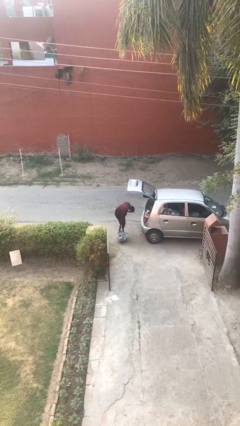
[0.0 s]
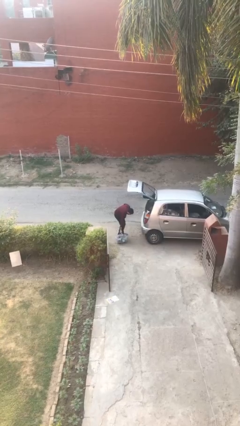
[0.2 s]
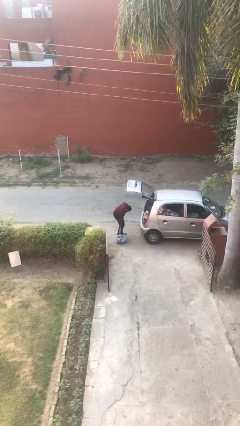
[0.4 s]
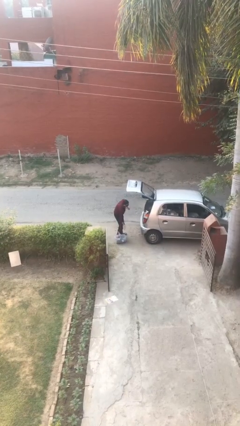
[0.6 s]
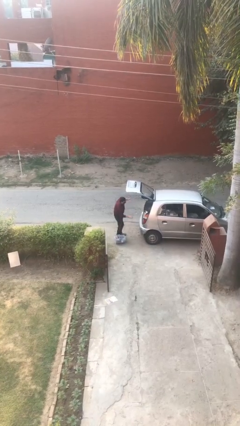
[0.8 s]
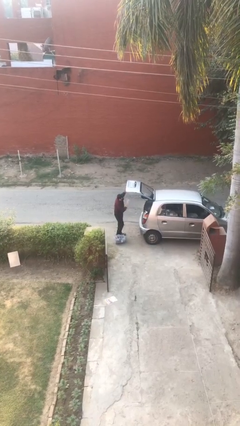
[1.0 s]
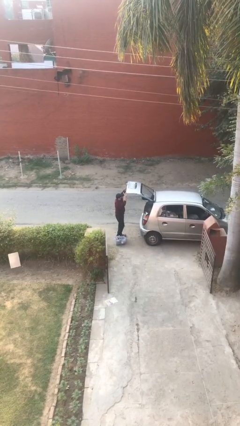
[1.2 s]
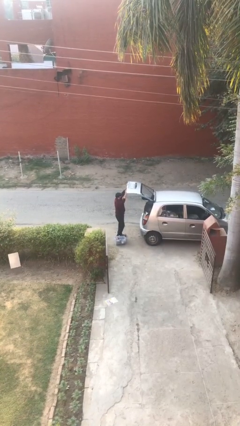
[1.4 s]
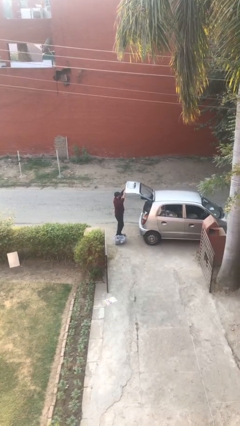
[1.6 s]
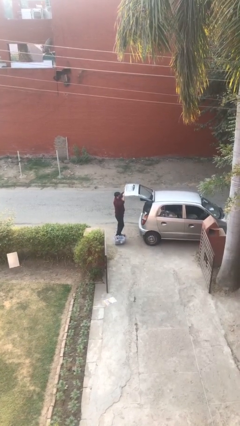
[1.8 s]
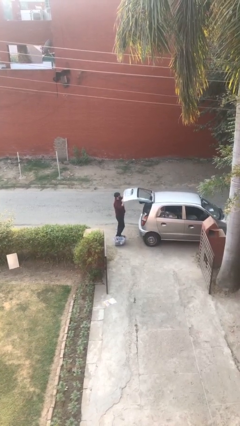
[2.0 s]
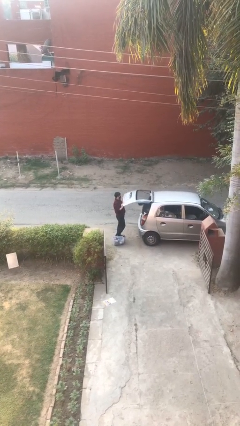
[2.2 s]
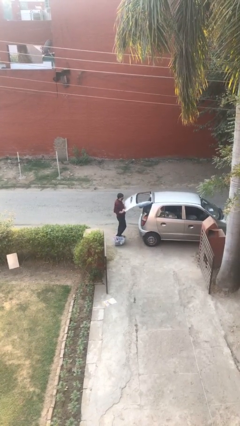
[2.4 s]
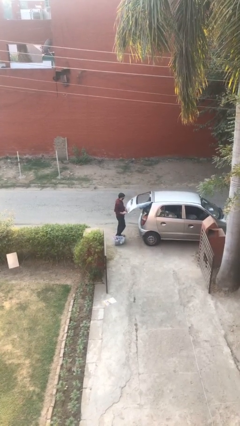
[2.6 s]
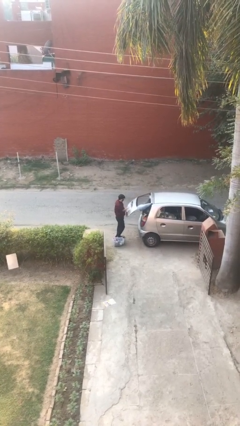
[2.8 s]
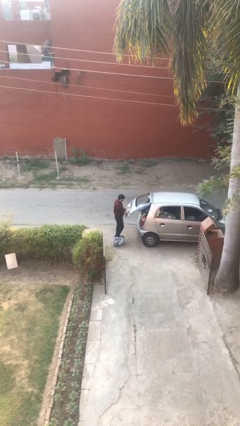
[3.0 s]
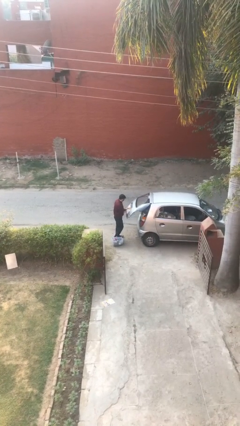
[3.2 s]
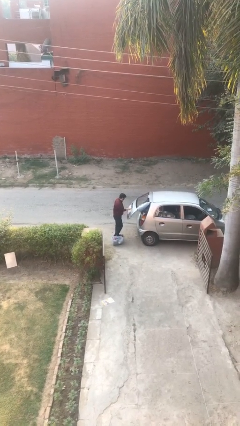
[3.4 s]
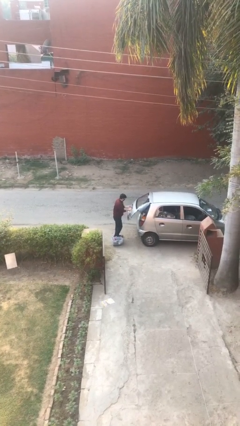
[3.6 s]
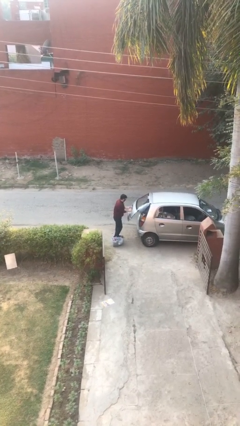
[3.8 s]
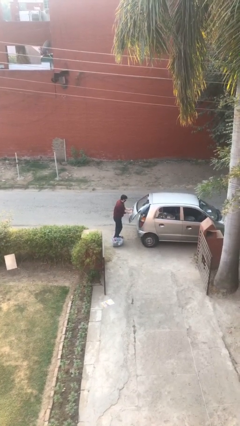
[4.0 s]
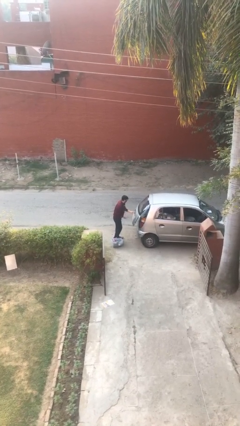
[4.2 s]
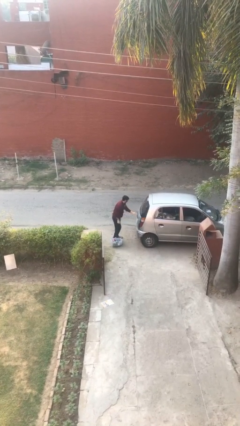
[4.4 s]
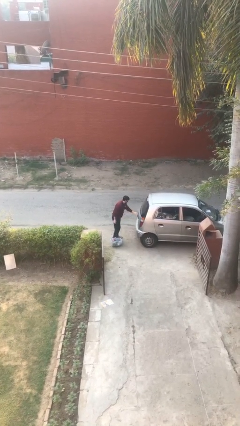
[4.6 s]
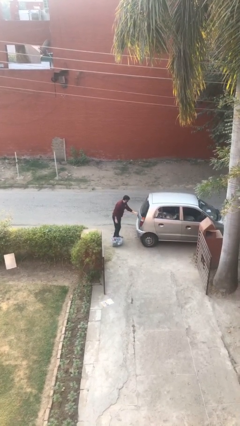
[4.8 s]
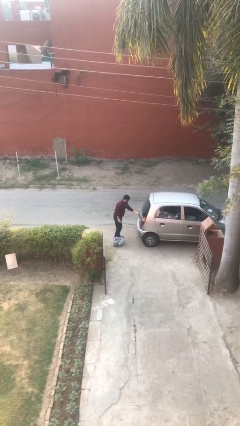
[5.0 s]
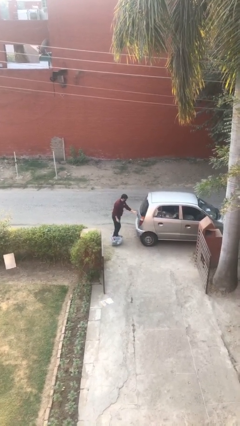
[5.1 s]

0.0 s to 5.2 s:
person closes car trunk

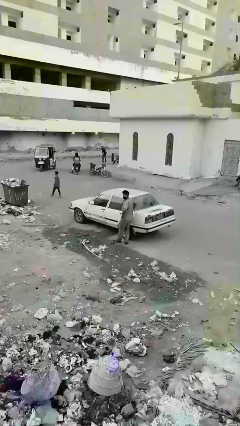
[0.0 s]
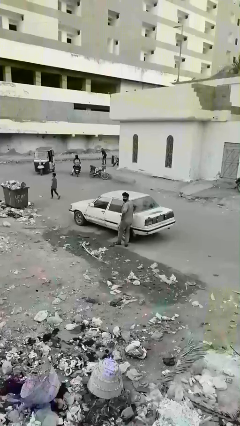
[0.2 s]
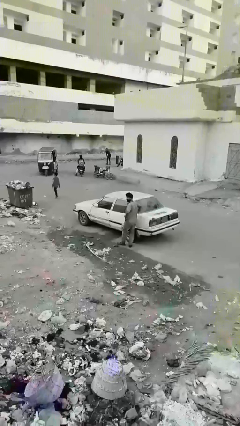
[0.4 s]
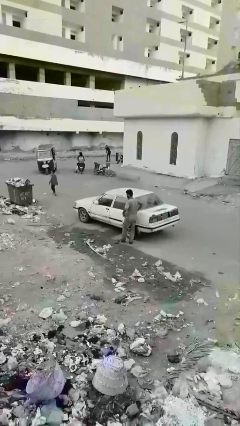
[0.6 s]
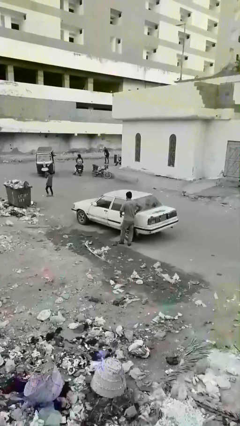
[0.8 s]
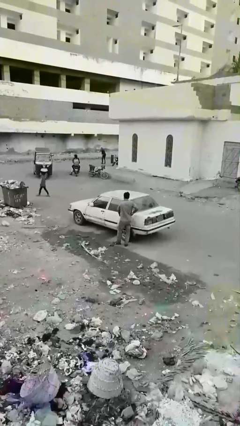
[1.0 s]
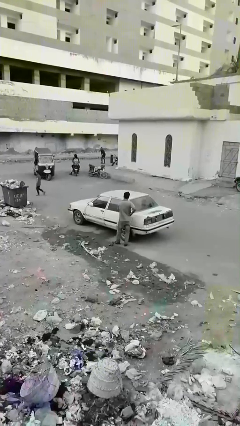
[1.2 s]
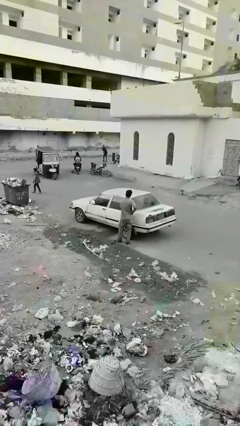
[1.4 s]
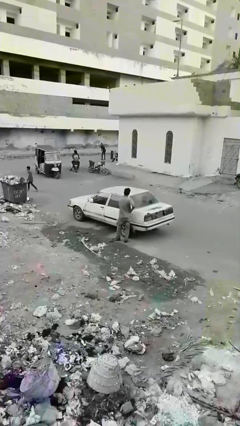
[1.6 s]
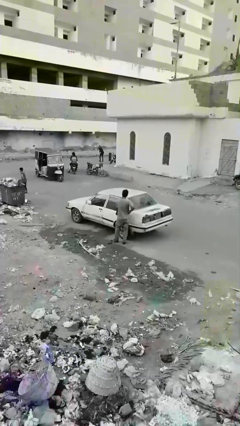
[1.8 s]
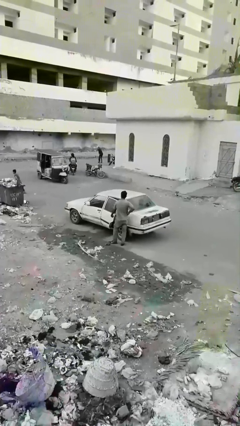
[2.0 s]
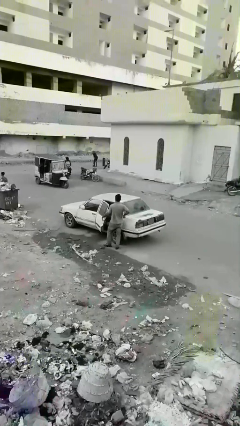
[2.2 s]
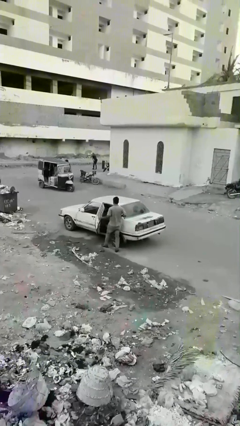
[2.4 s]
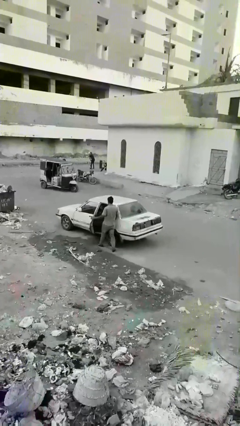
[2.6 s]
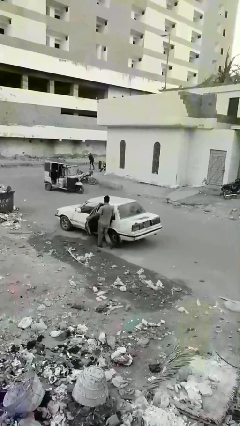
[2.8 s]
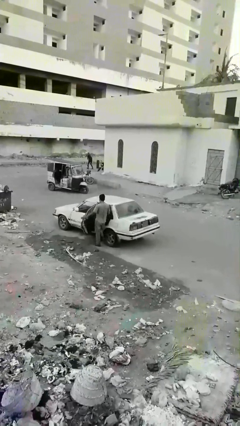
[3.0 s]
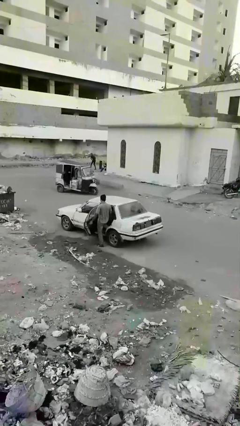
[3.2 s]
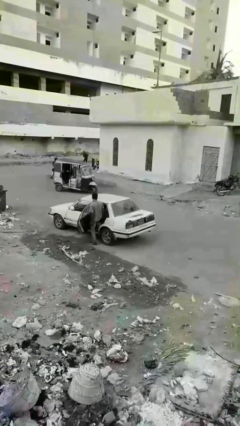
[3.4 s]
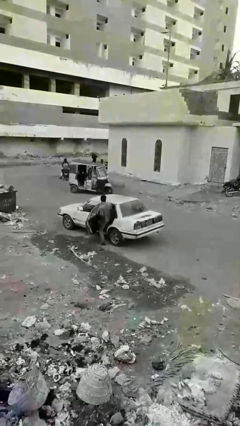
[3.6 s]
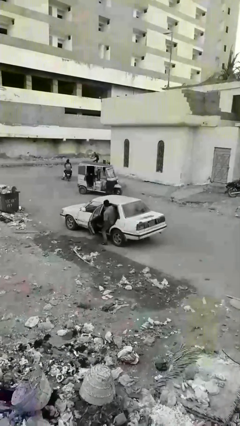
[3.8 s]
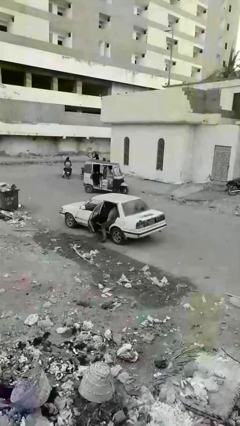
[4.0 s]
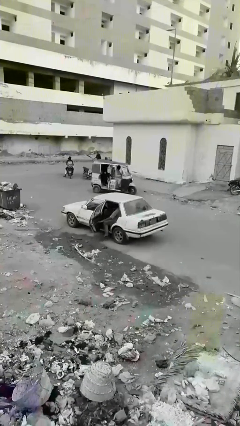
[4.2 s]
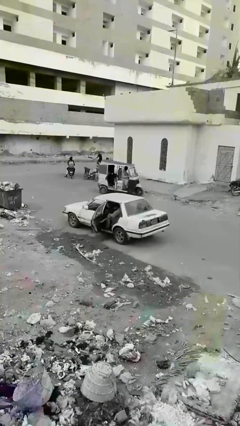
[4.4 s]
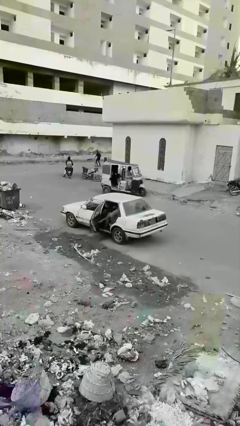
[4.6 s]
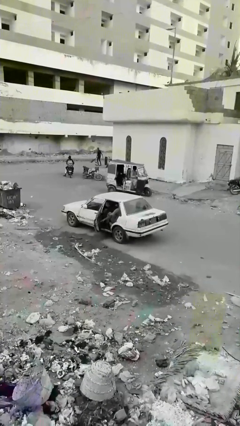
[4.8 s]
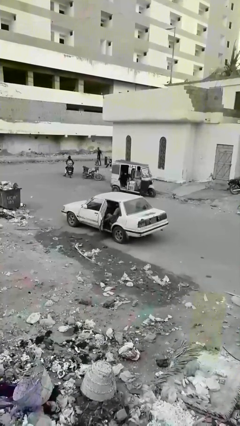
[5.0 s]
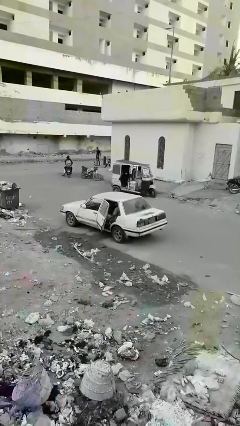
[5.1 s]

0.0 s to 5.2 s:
car picks up person

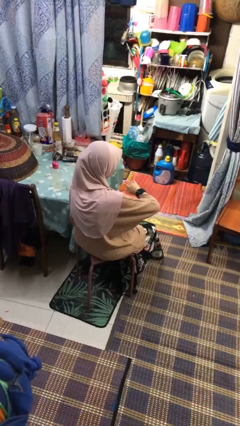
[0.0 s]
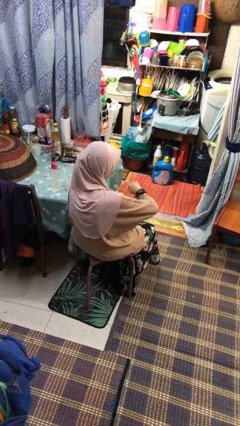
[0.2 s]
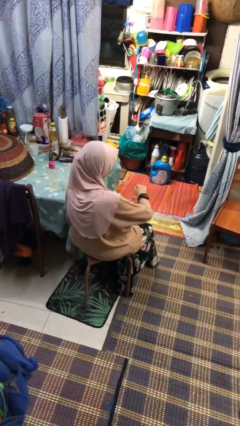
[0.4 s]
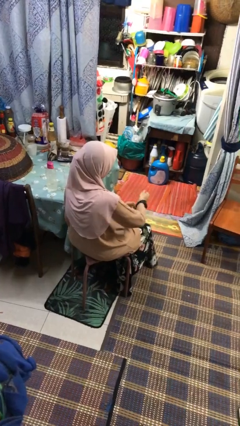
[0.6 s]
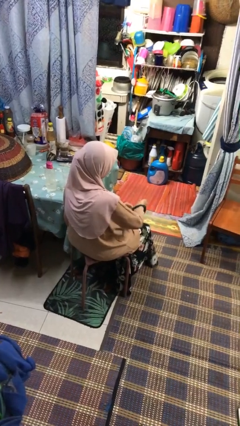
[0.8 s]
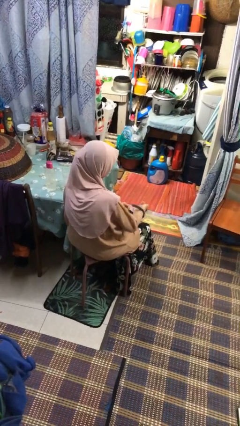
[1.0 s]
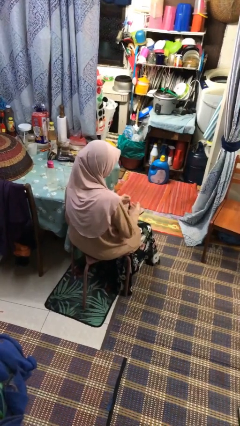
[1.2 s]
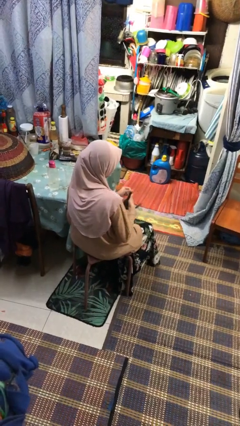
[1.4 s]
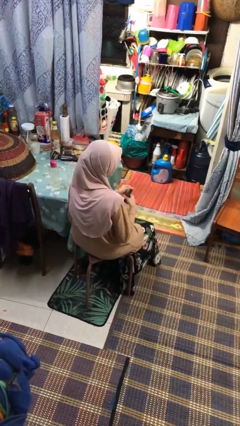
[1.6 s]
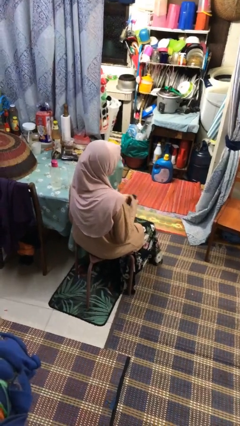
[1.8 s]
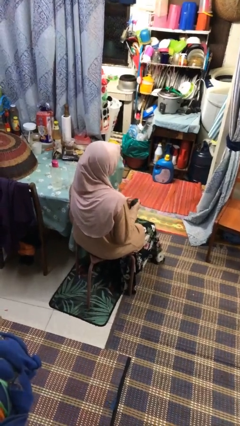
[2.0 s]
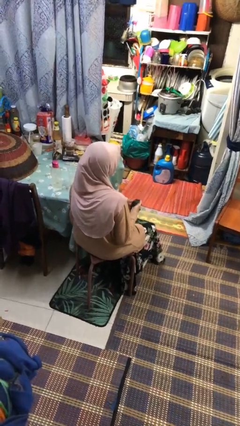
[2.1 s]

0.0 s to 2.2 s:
person takes off wristwatch

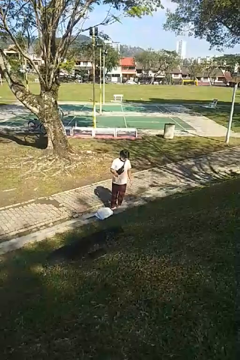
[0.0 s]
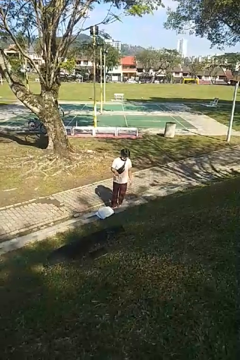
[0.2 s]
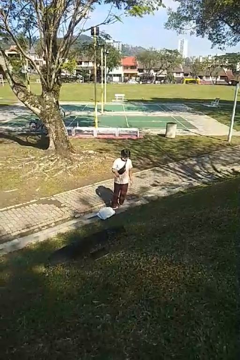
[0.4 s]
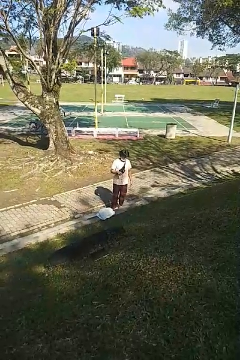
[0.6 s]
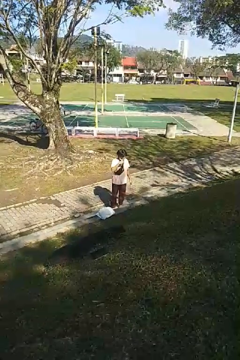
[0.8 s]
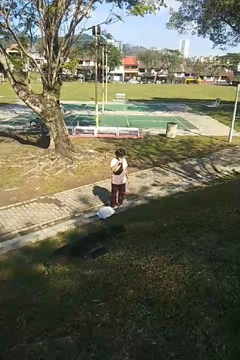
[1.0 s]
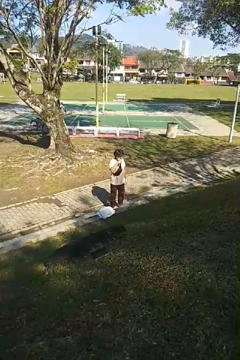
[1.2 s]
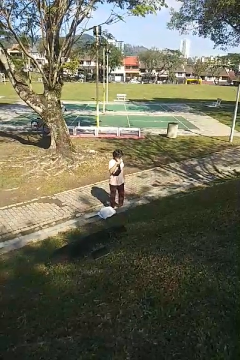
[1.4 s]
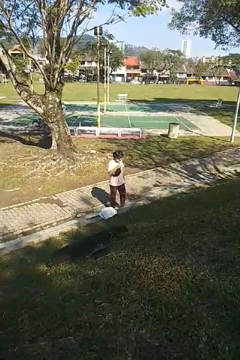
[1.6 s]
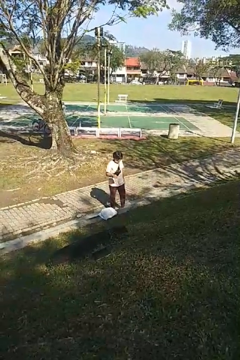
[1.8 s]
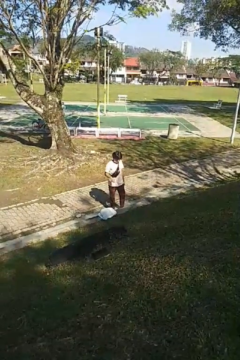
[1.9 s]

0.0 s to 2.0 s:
person brushes teeth

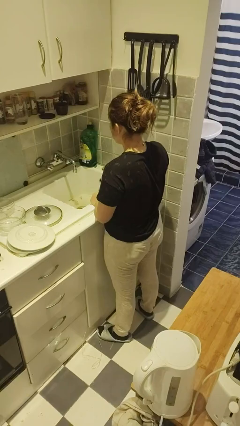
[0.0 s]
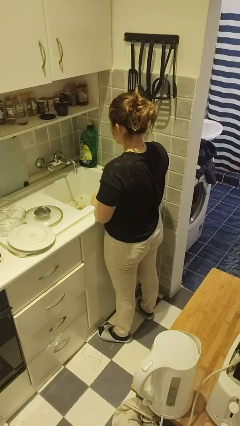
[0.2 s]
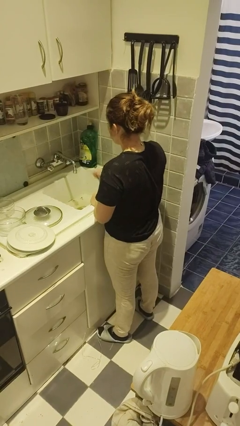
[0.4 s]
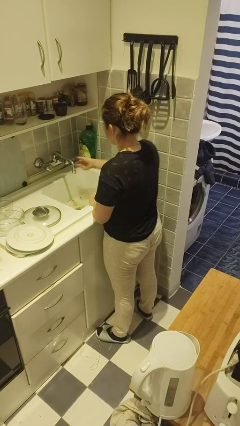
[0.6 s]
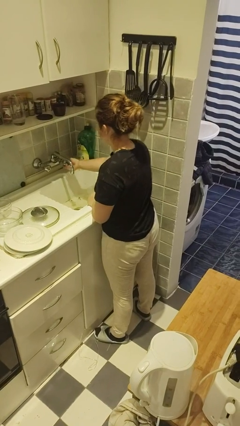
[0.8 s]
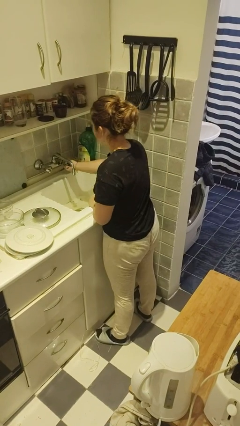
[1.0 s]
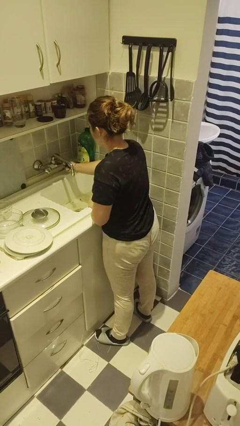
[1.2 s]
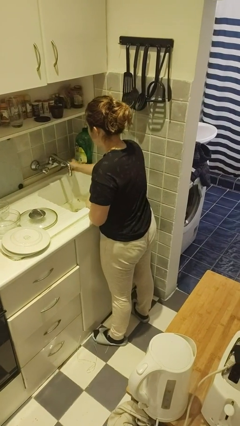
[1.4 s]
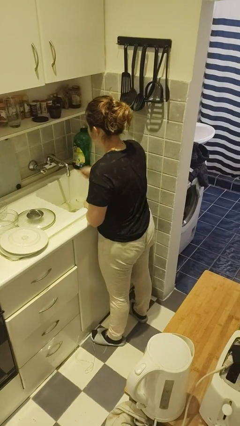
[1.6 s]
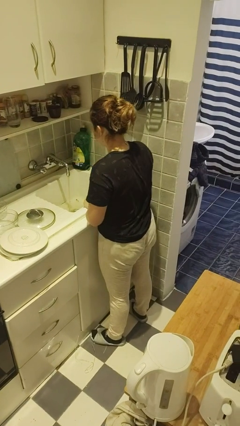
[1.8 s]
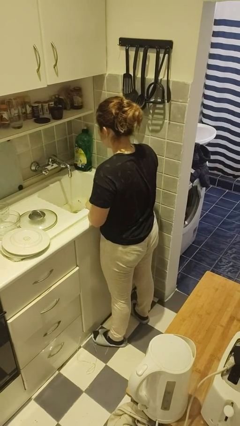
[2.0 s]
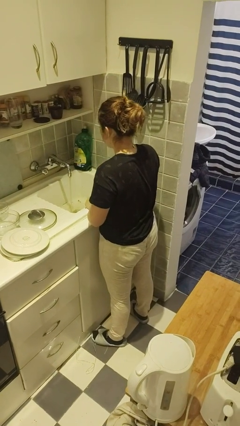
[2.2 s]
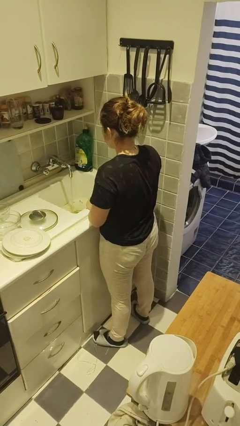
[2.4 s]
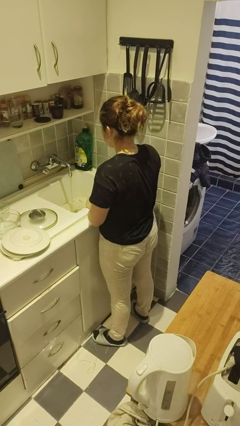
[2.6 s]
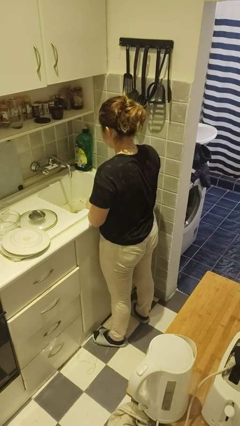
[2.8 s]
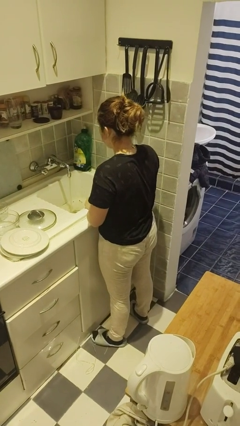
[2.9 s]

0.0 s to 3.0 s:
person turns on faucet

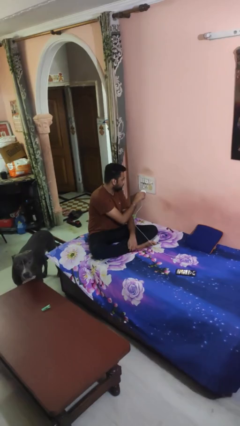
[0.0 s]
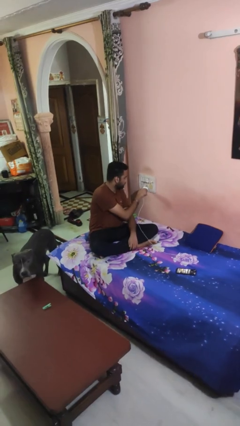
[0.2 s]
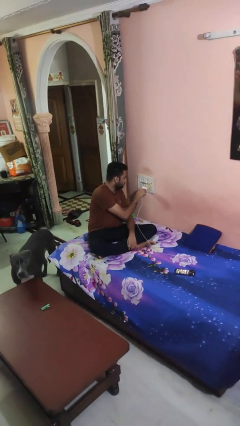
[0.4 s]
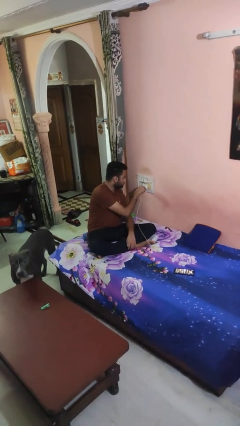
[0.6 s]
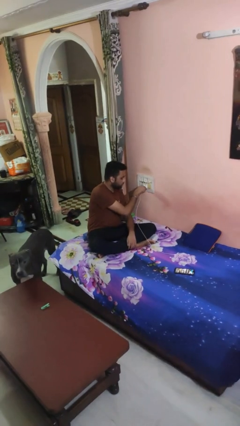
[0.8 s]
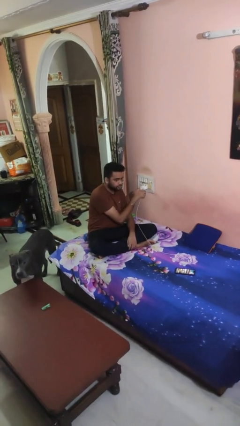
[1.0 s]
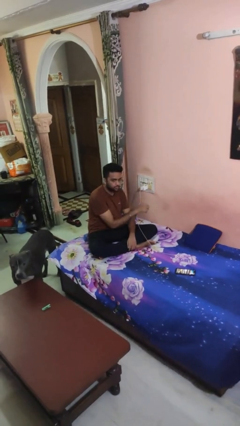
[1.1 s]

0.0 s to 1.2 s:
person plugs into electrical socket
